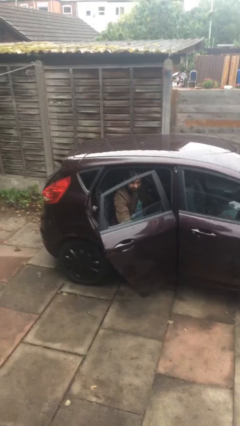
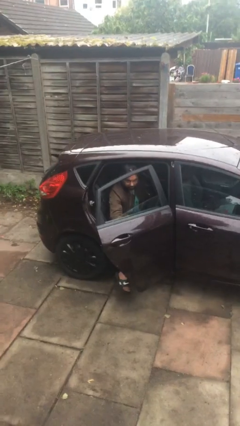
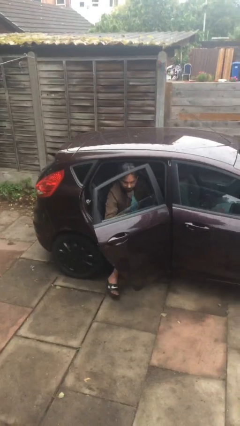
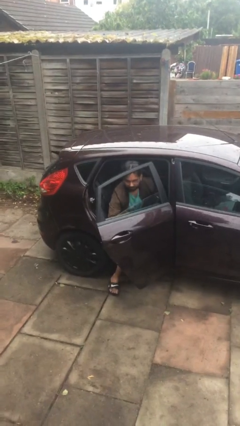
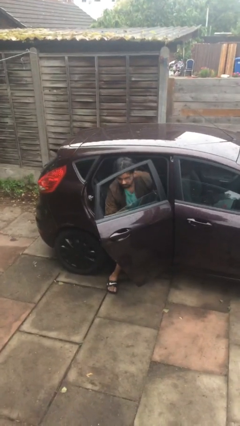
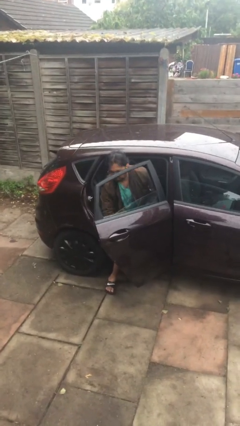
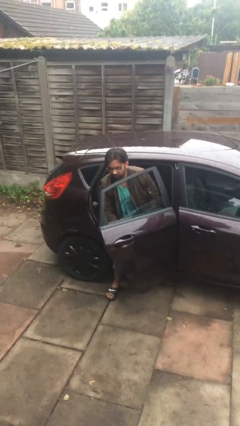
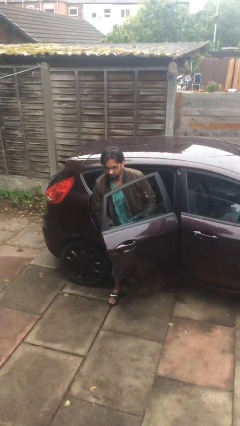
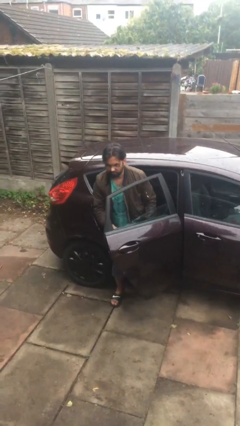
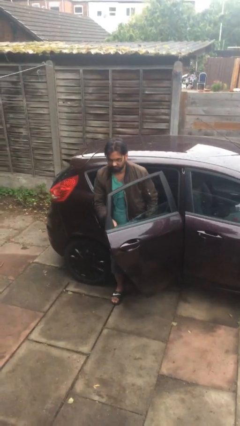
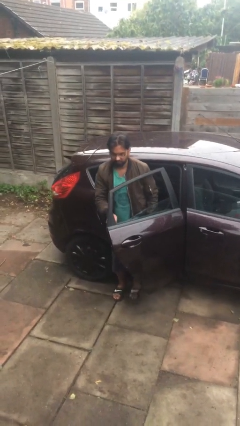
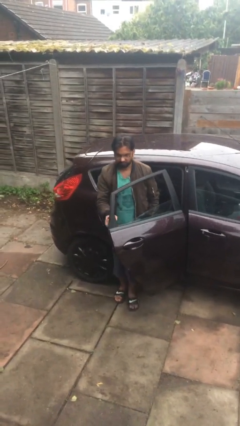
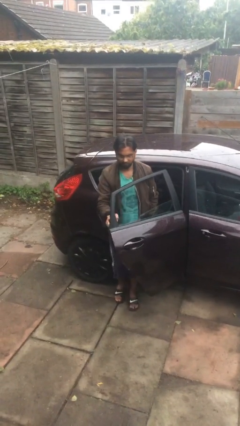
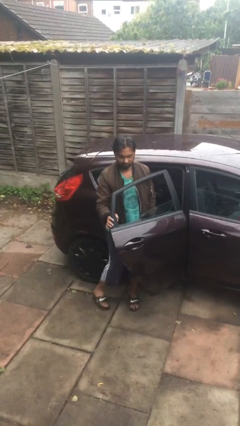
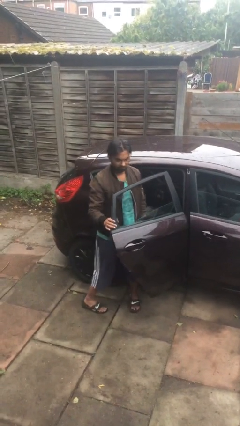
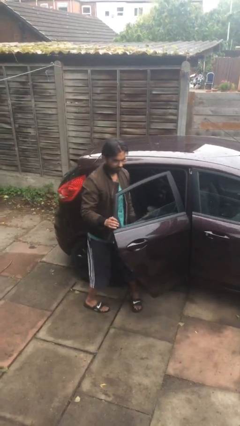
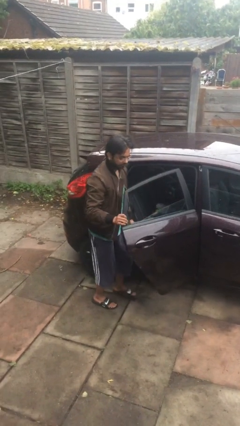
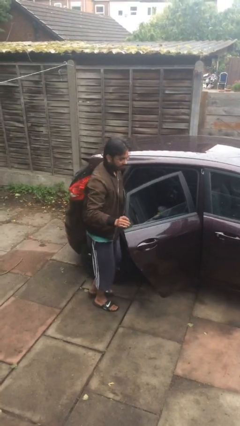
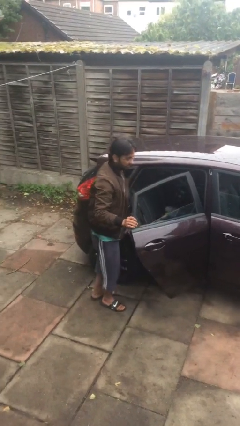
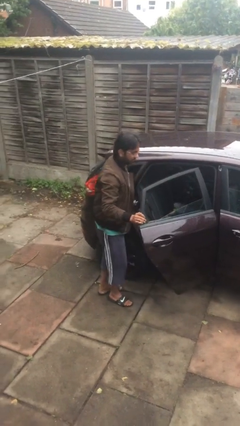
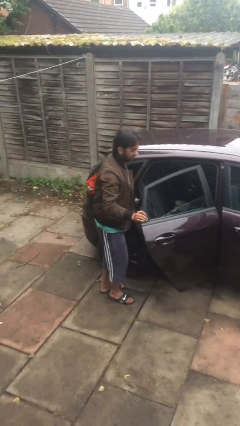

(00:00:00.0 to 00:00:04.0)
person exits car

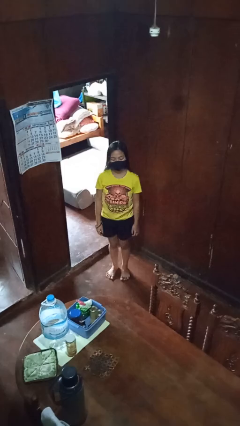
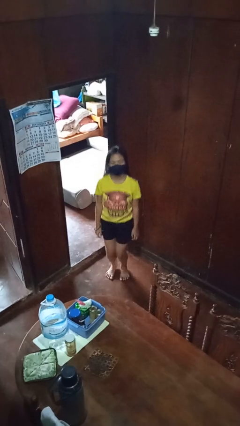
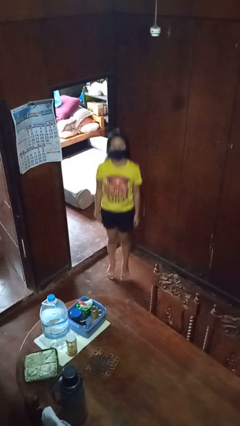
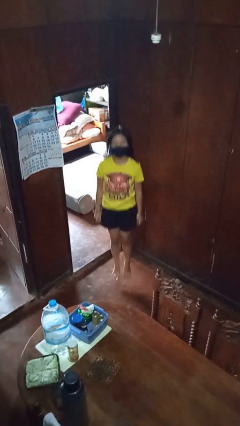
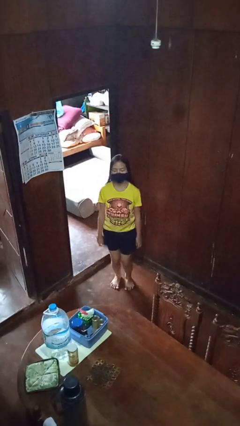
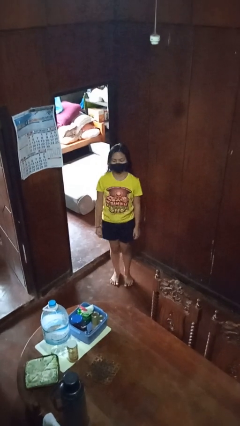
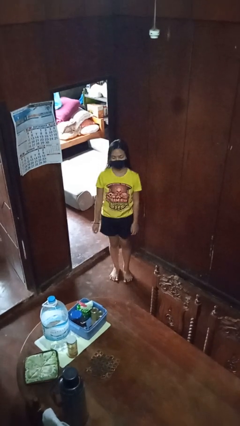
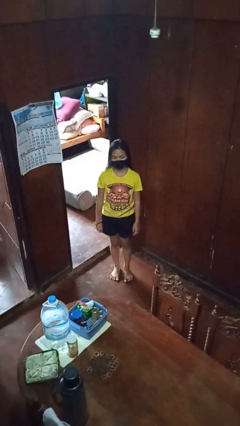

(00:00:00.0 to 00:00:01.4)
person jumps

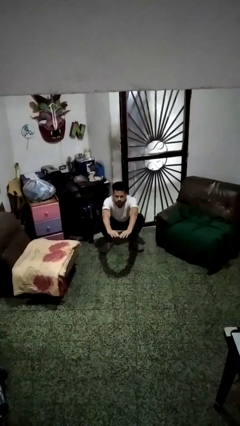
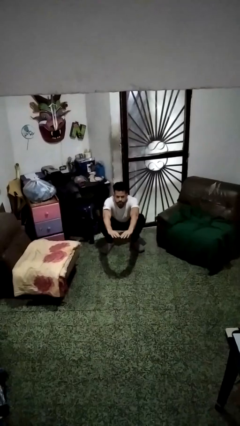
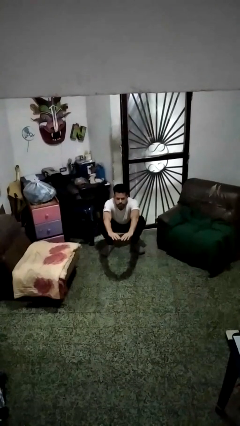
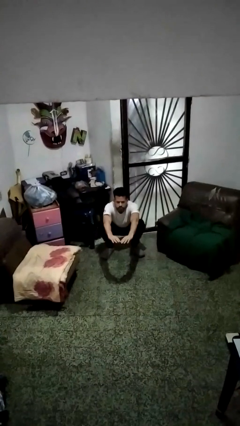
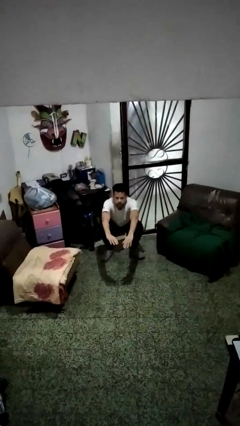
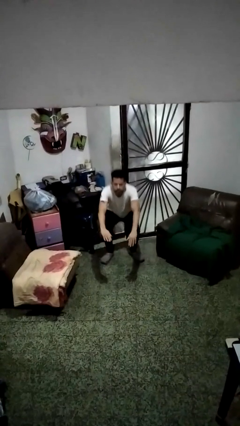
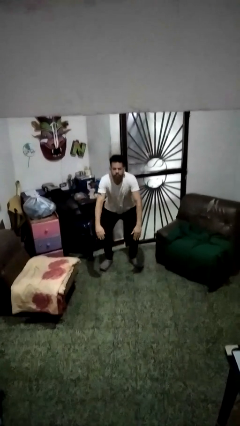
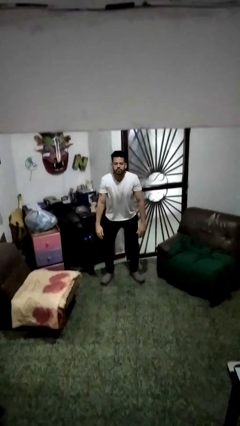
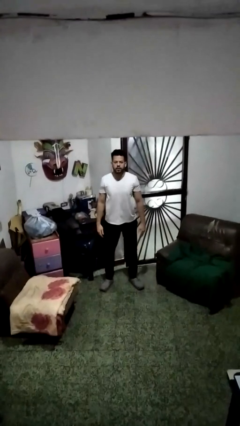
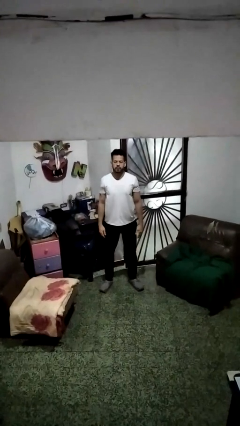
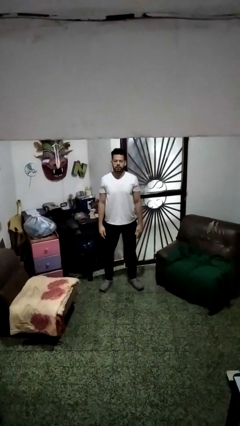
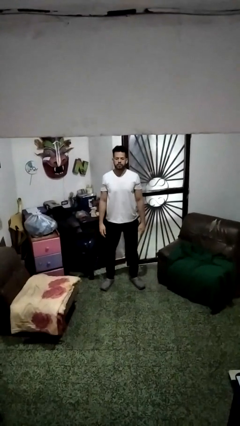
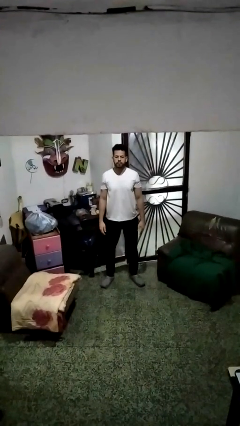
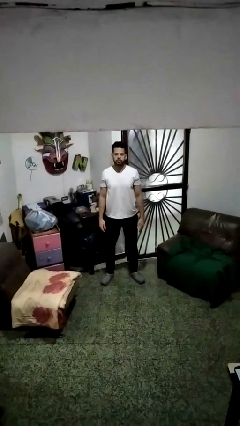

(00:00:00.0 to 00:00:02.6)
person stands up

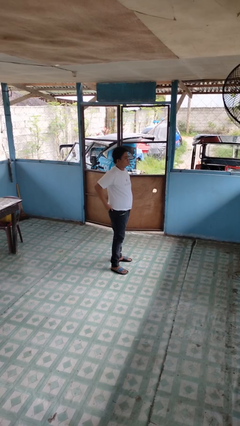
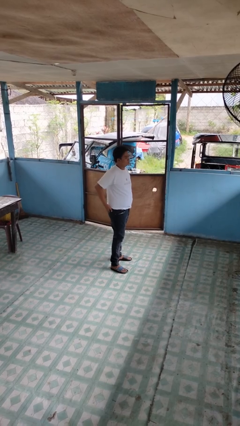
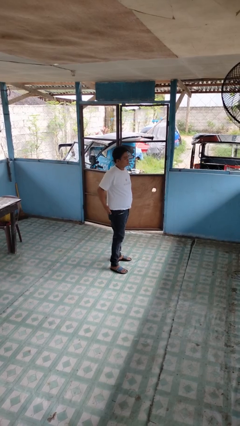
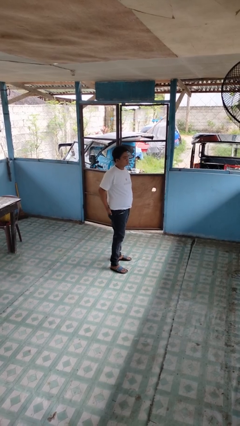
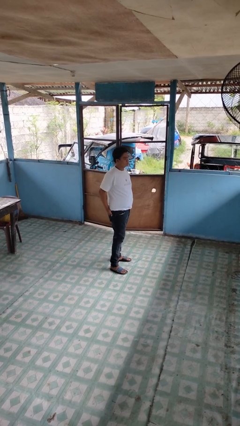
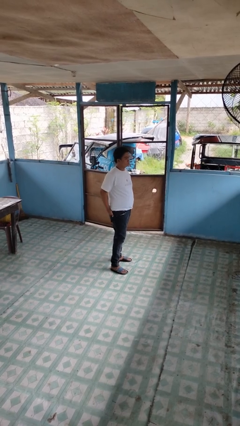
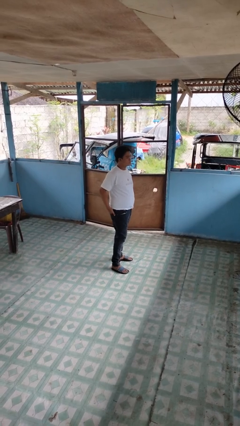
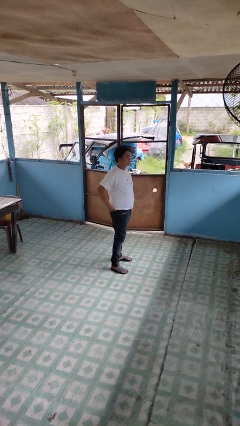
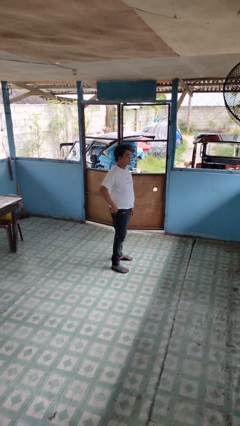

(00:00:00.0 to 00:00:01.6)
person puts hands in back pockets

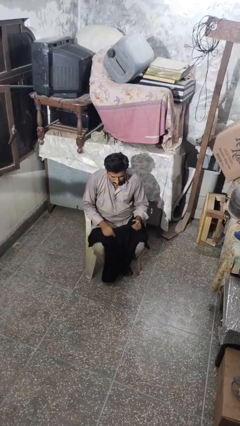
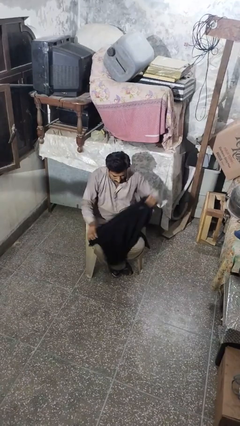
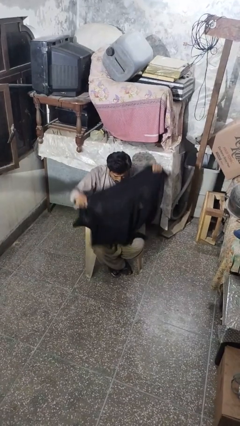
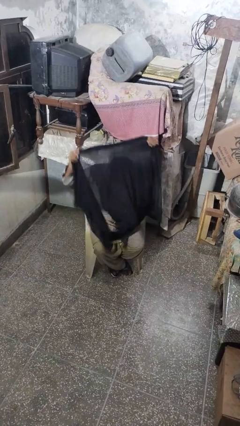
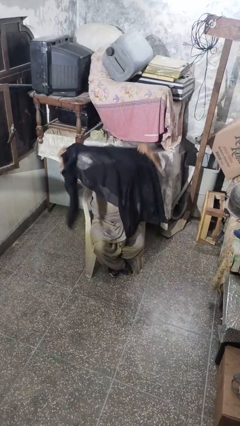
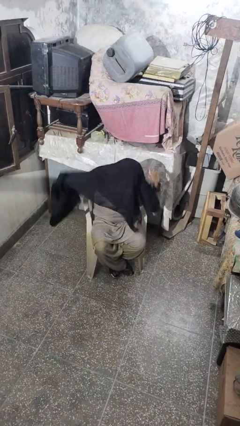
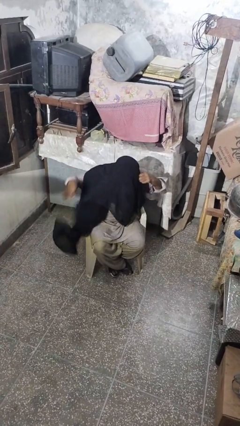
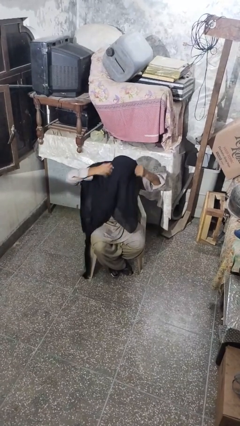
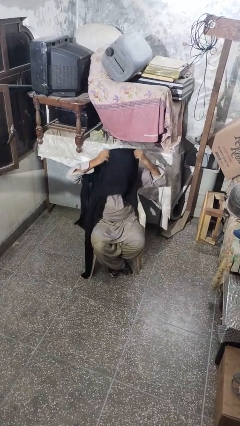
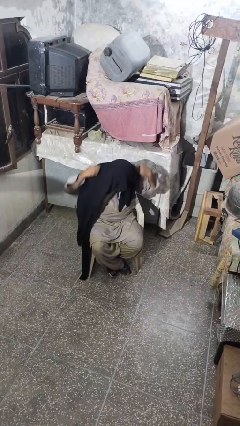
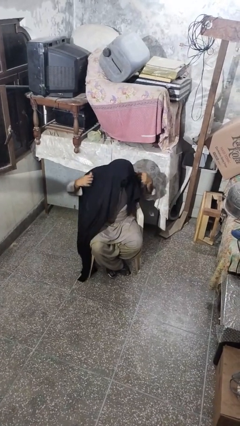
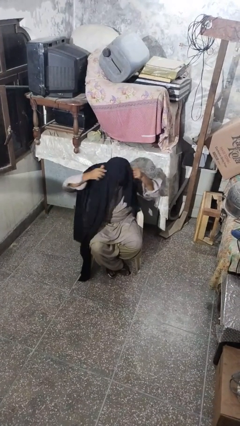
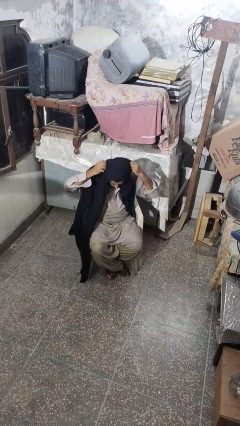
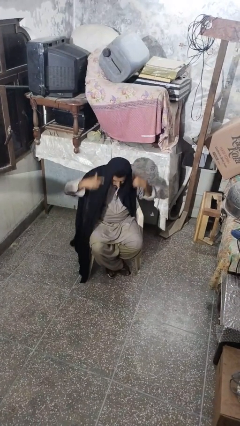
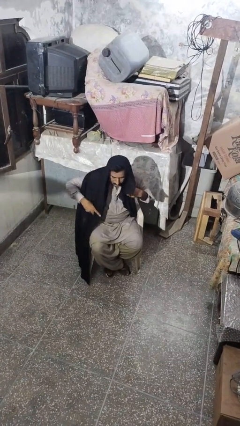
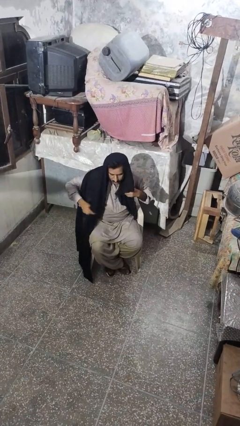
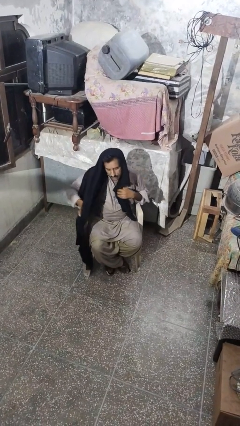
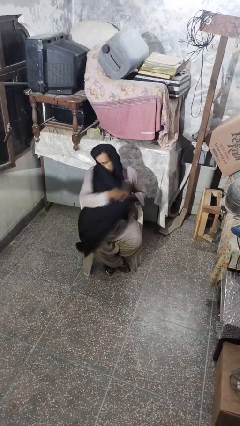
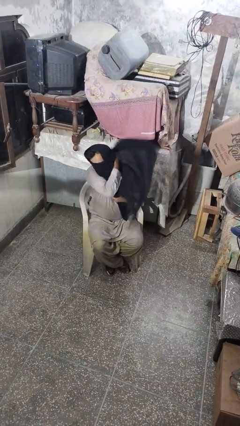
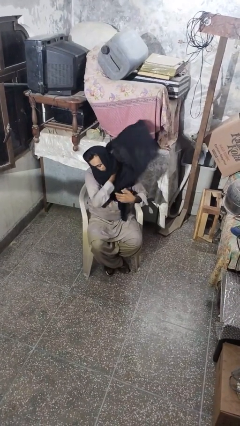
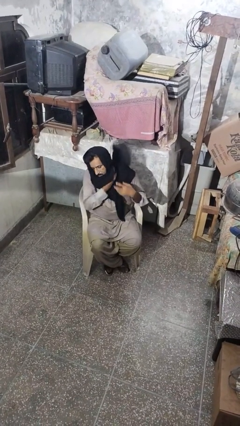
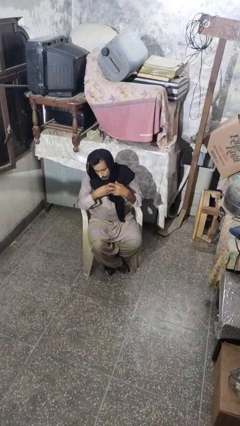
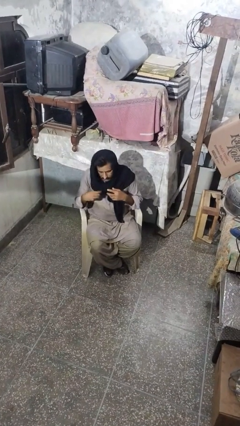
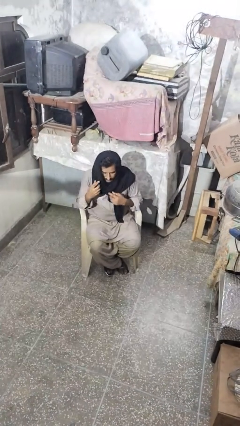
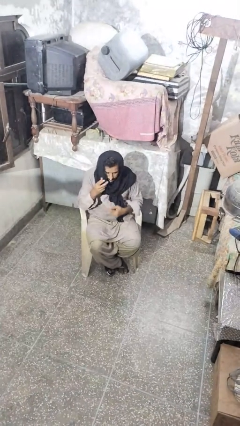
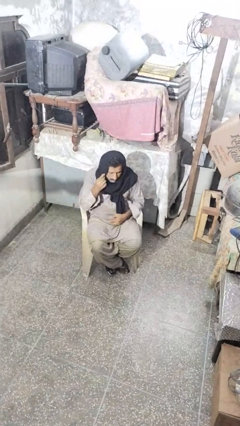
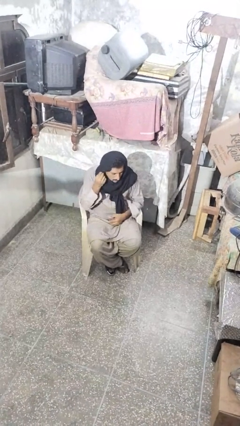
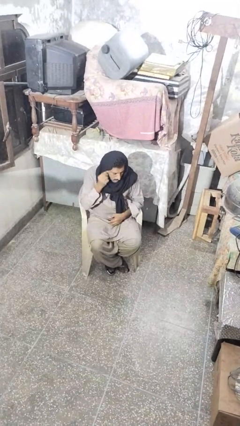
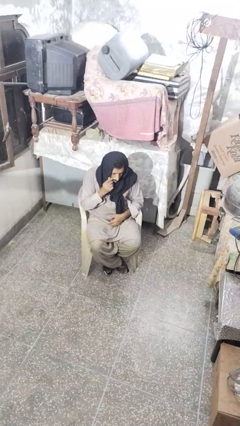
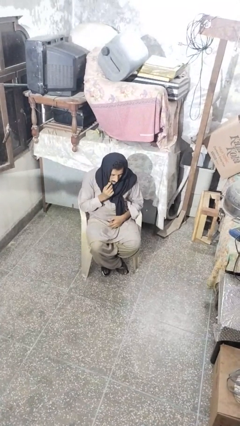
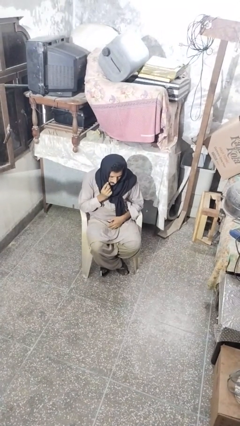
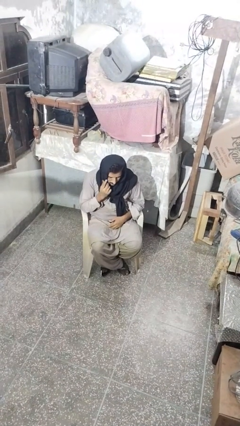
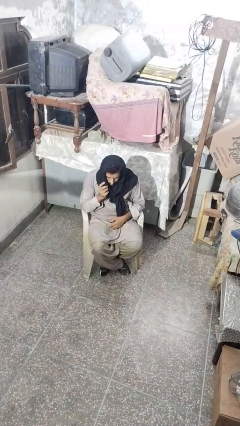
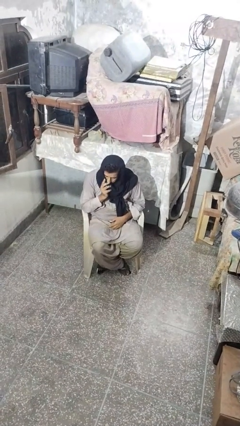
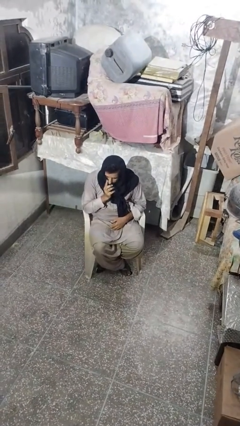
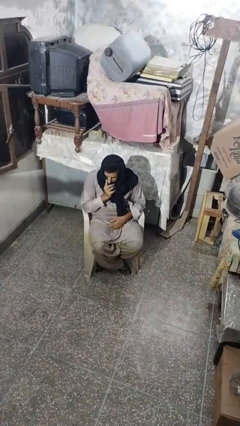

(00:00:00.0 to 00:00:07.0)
person puts on scarf

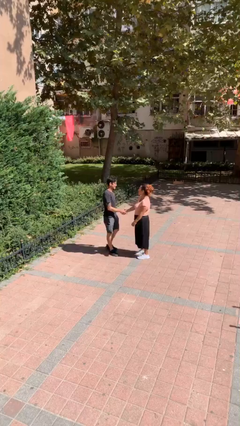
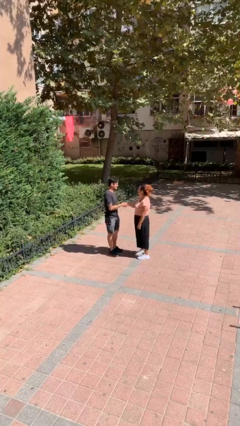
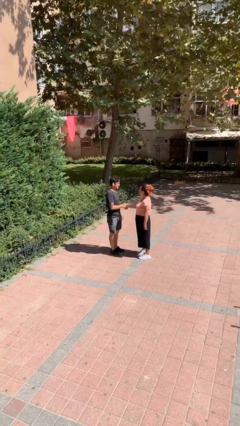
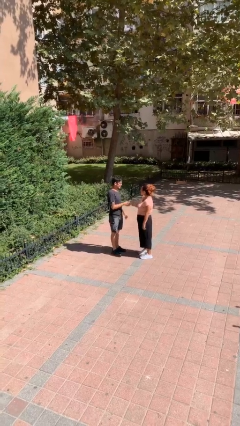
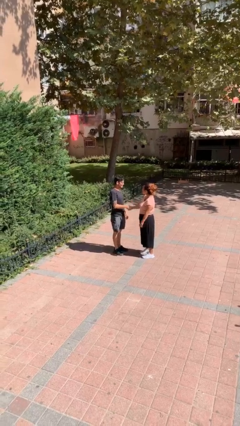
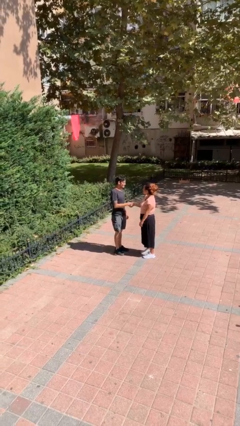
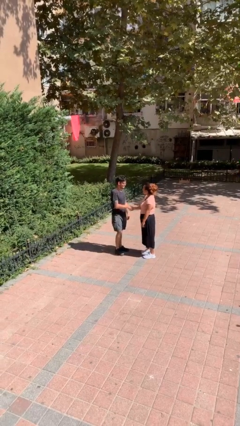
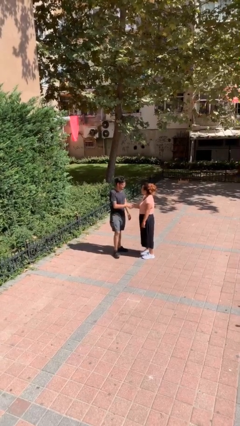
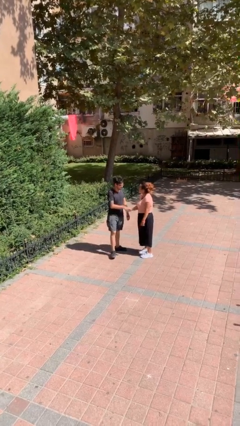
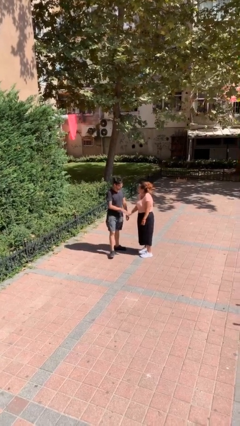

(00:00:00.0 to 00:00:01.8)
person shakes hand
